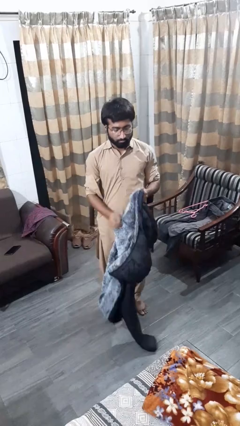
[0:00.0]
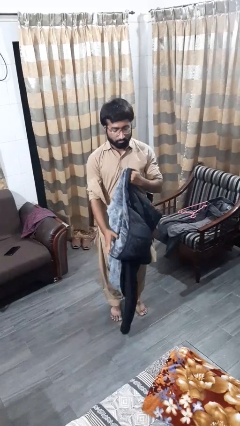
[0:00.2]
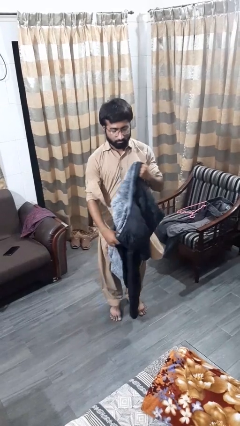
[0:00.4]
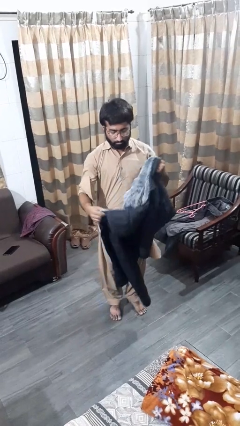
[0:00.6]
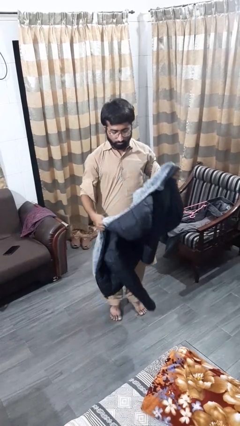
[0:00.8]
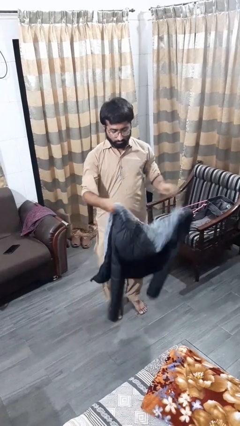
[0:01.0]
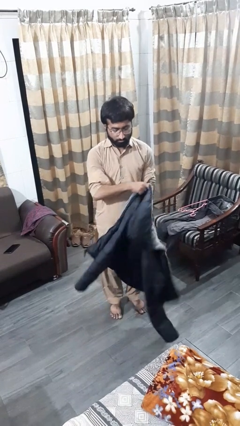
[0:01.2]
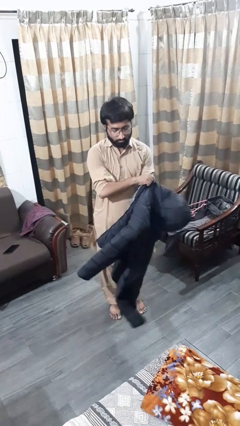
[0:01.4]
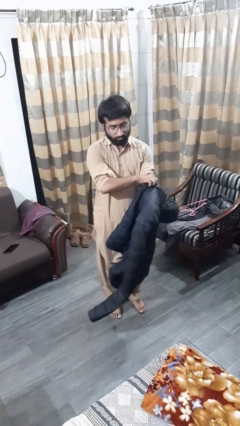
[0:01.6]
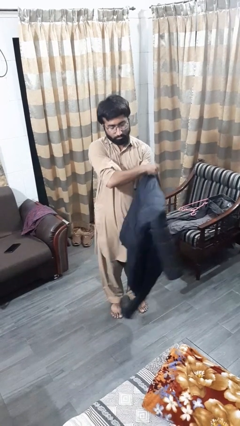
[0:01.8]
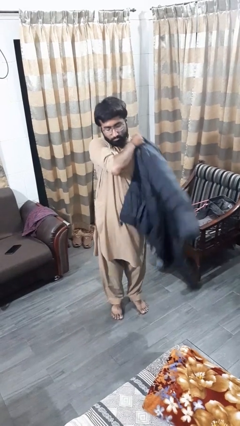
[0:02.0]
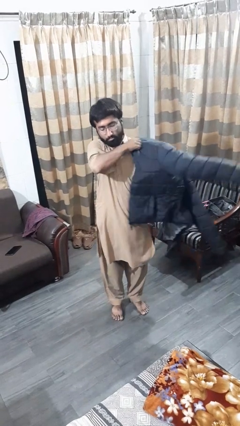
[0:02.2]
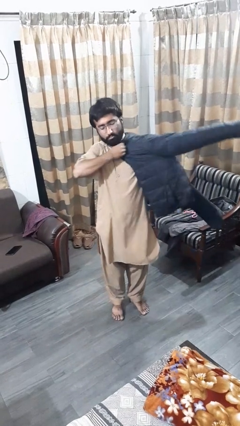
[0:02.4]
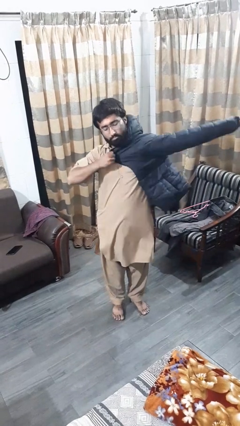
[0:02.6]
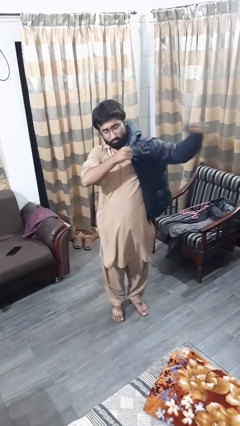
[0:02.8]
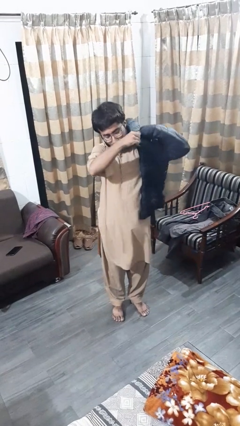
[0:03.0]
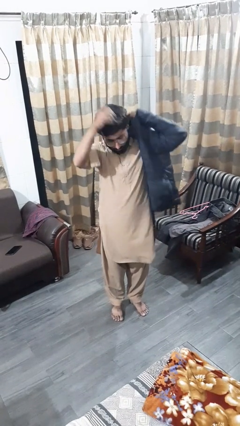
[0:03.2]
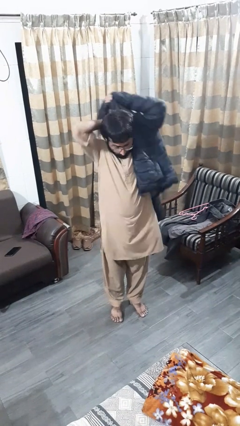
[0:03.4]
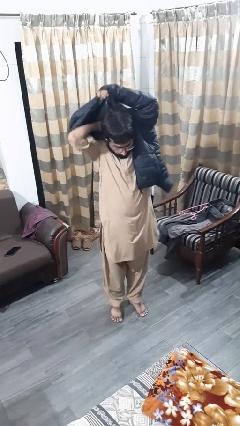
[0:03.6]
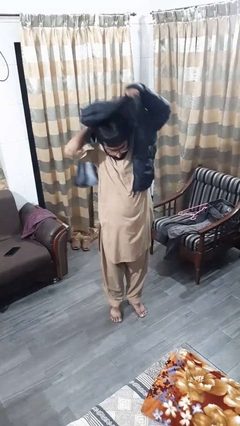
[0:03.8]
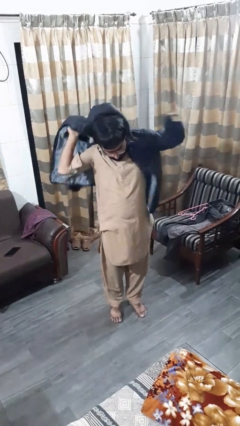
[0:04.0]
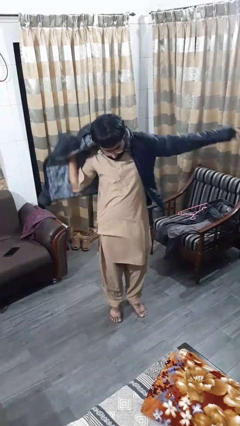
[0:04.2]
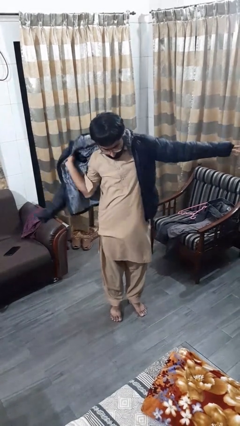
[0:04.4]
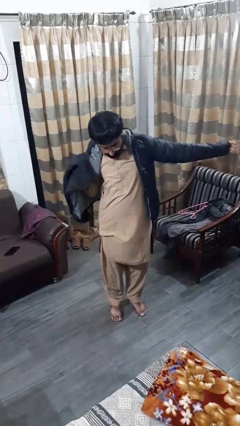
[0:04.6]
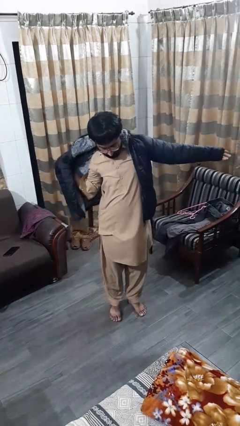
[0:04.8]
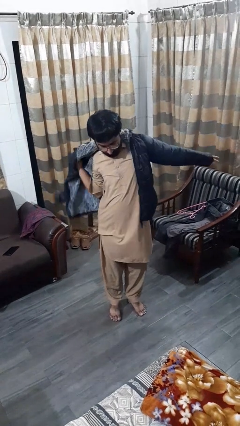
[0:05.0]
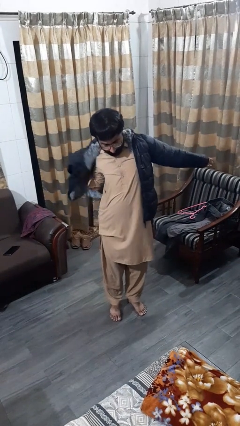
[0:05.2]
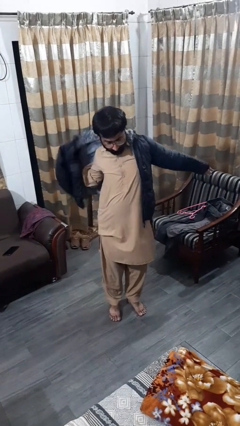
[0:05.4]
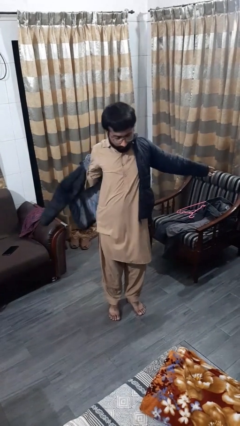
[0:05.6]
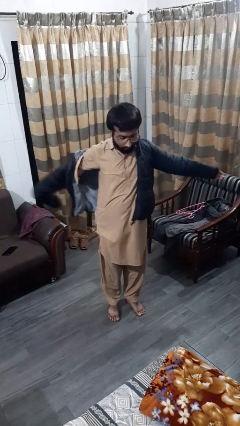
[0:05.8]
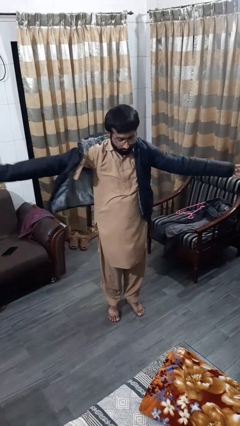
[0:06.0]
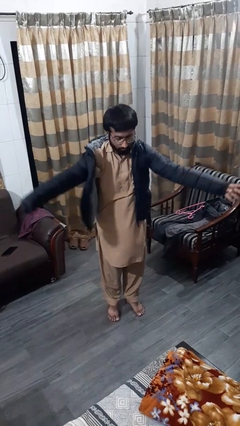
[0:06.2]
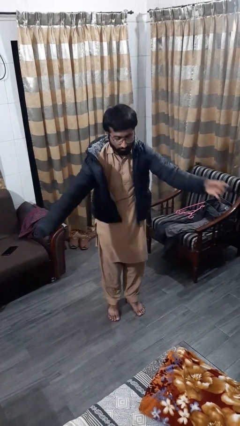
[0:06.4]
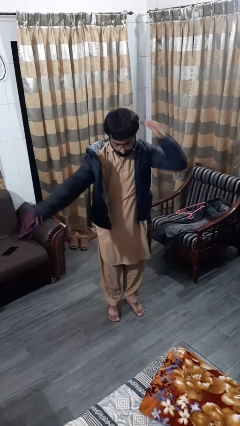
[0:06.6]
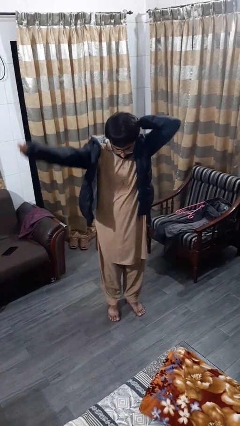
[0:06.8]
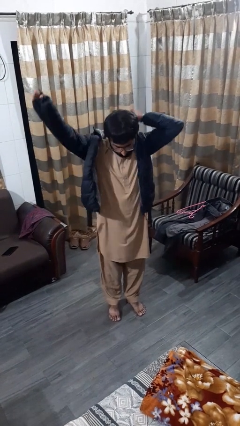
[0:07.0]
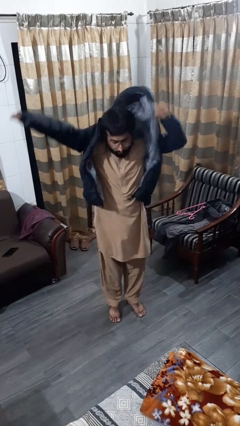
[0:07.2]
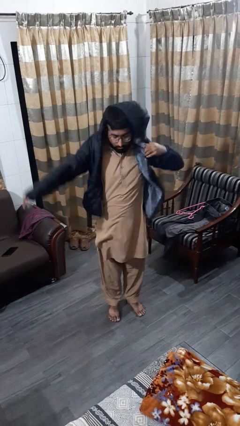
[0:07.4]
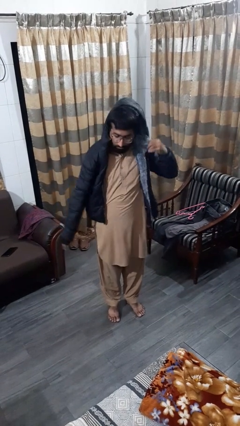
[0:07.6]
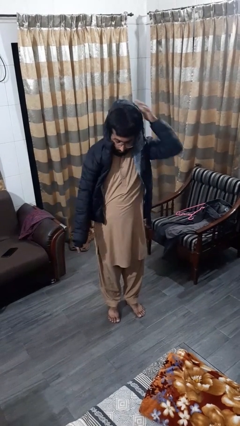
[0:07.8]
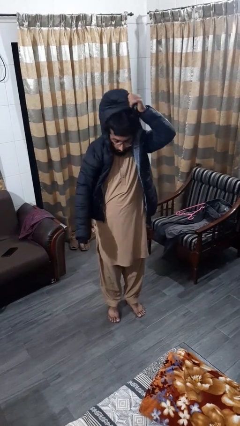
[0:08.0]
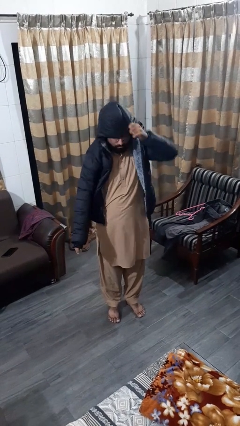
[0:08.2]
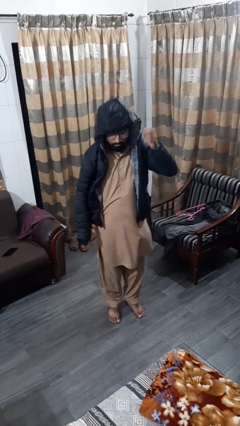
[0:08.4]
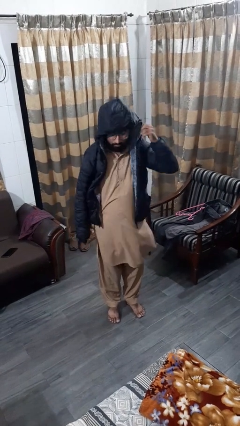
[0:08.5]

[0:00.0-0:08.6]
person puts on hoodie

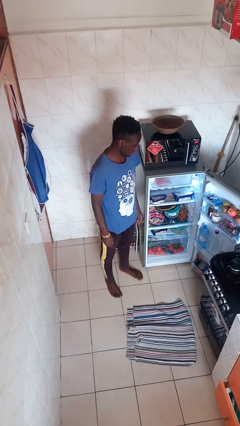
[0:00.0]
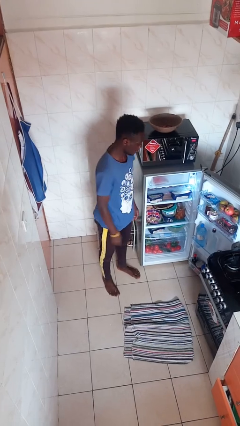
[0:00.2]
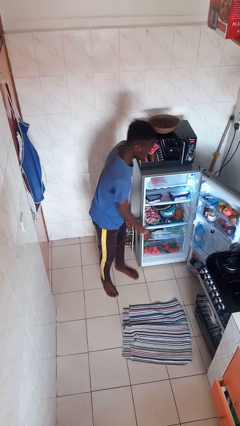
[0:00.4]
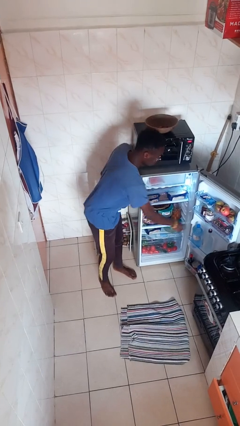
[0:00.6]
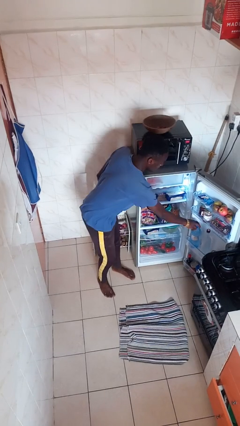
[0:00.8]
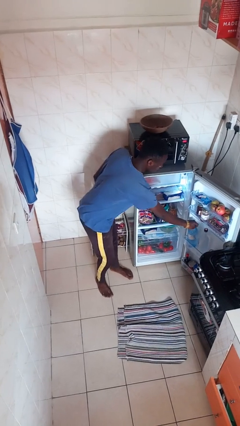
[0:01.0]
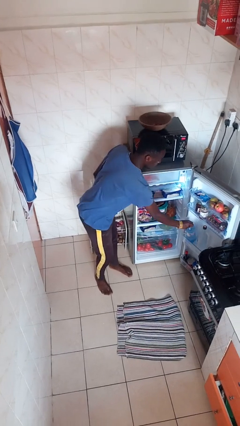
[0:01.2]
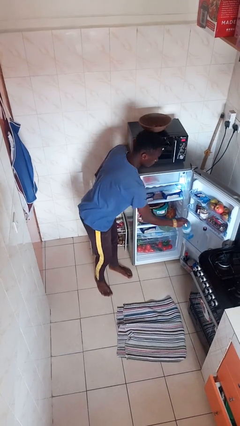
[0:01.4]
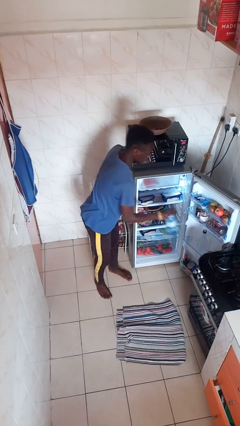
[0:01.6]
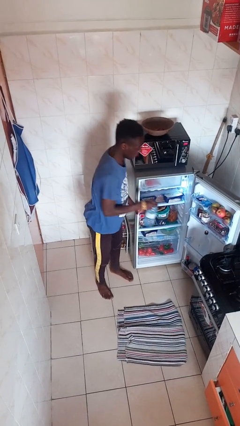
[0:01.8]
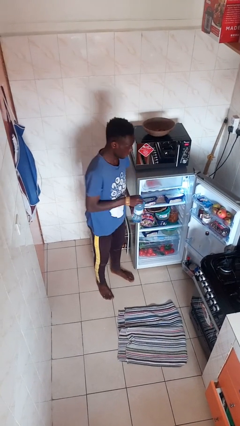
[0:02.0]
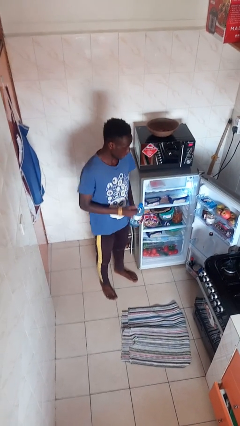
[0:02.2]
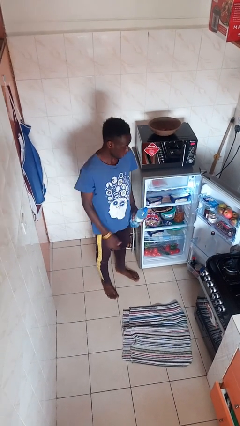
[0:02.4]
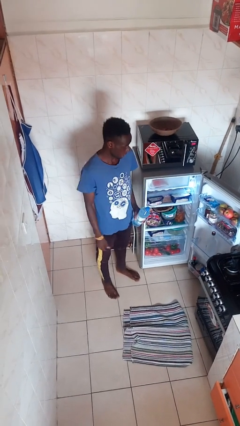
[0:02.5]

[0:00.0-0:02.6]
person takes object from refrigerator

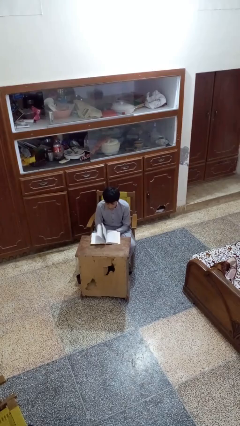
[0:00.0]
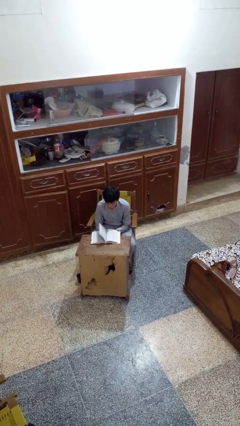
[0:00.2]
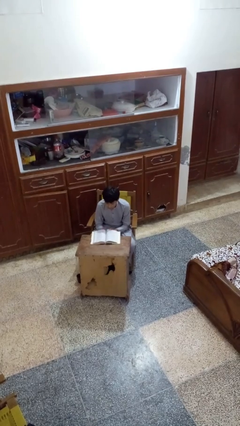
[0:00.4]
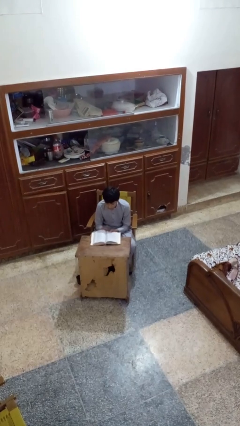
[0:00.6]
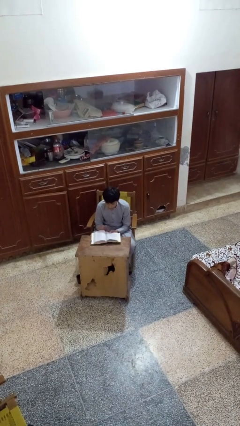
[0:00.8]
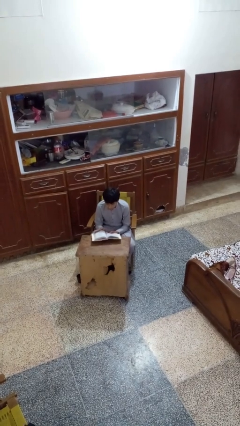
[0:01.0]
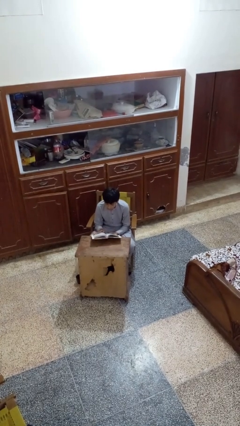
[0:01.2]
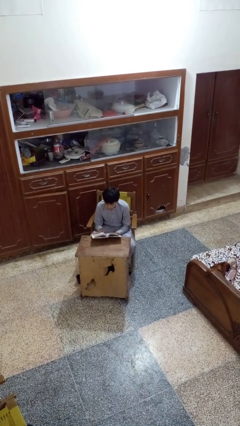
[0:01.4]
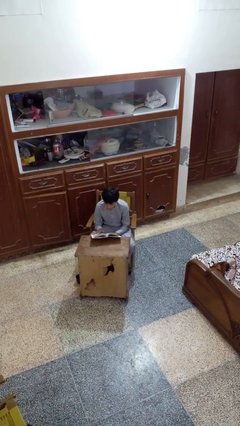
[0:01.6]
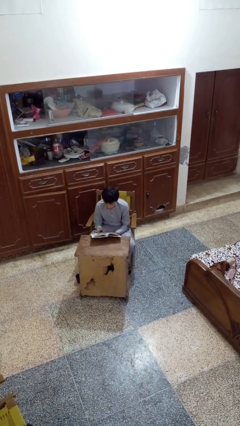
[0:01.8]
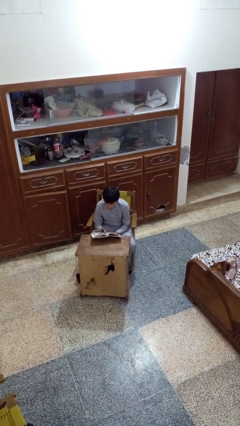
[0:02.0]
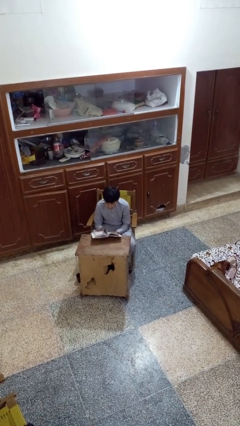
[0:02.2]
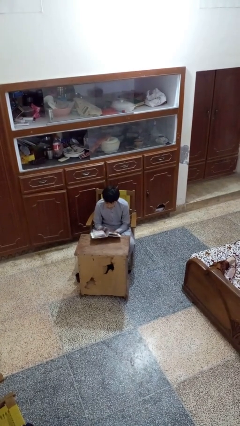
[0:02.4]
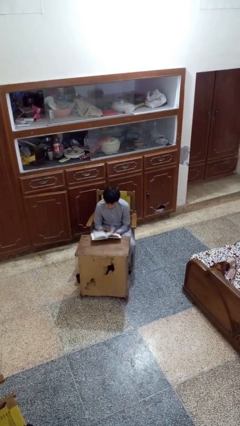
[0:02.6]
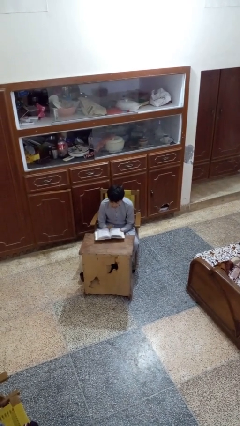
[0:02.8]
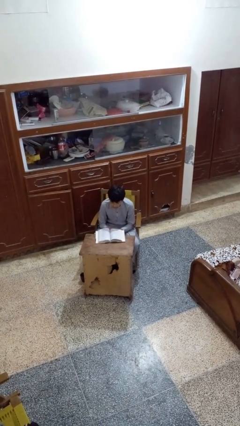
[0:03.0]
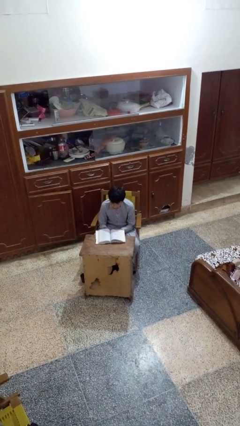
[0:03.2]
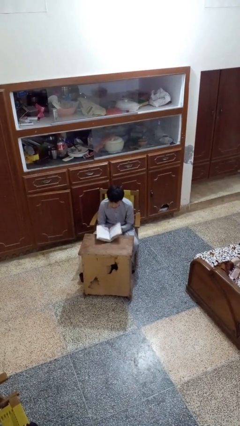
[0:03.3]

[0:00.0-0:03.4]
person reads book

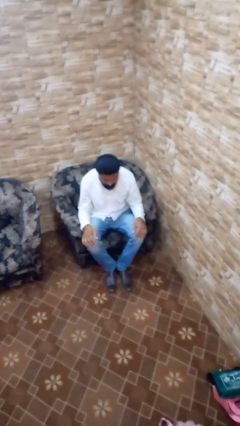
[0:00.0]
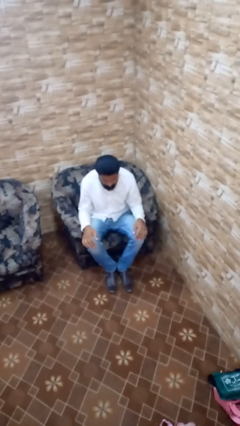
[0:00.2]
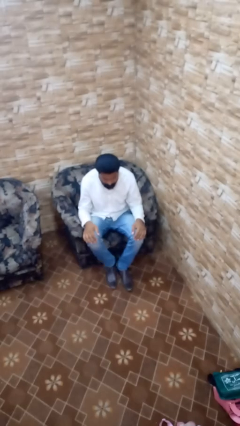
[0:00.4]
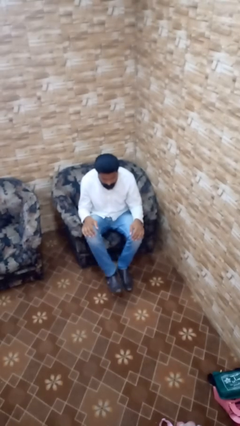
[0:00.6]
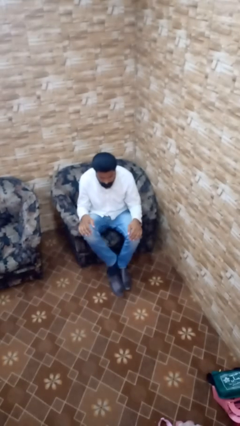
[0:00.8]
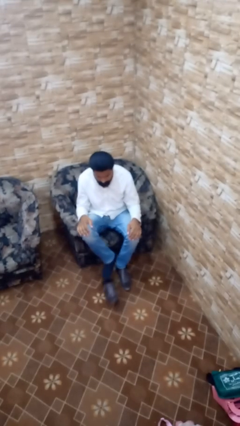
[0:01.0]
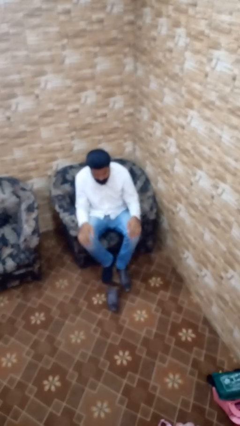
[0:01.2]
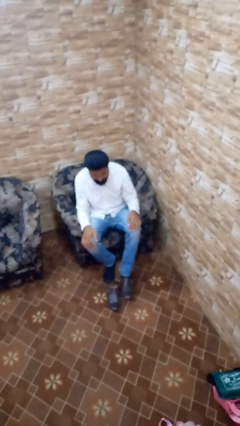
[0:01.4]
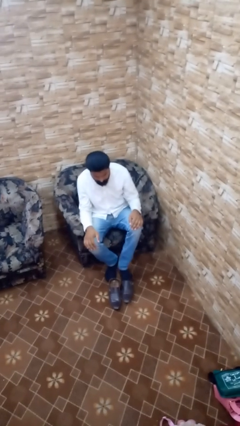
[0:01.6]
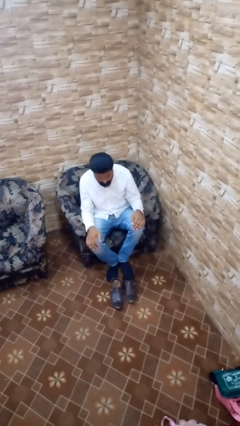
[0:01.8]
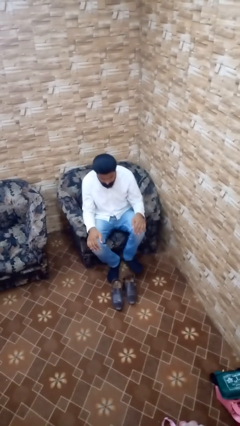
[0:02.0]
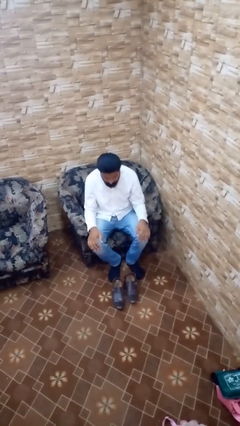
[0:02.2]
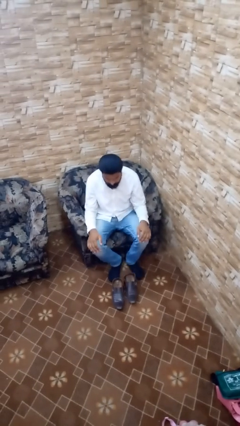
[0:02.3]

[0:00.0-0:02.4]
person takes off shoes

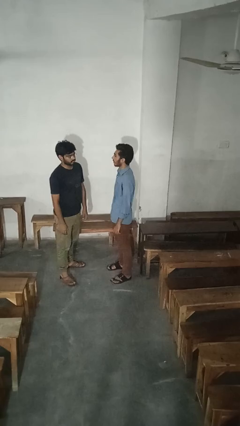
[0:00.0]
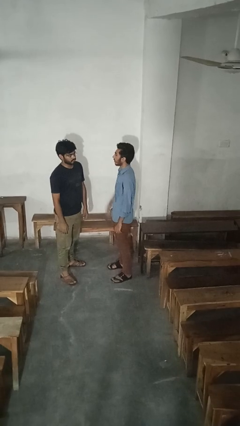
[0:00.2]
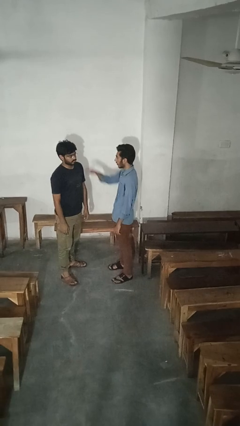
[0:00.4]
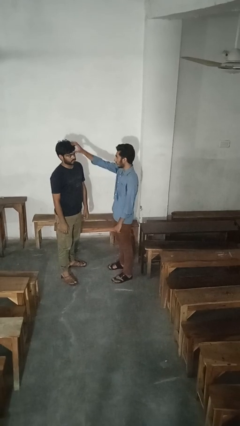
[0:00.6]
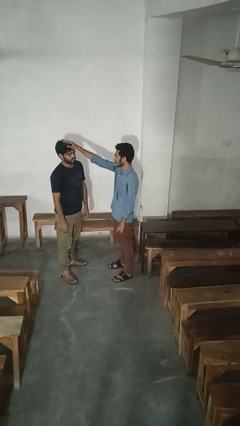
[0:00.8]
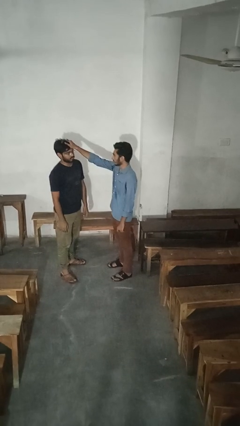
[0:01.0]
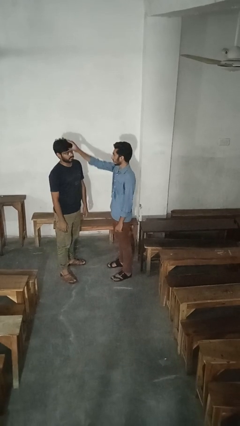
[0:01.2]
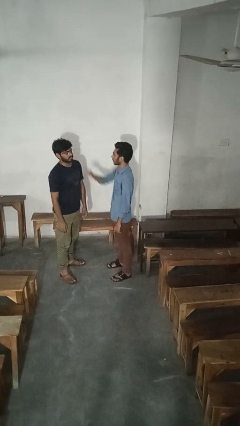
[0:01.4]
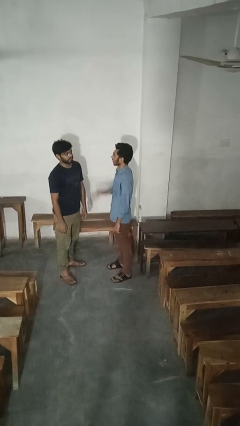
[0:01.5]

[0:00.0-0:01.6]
person grabs person by hair
